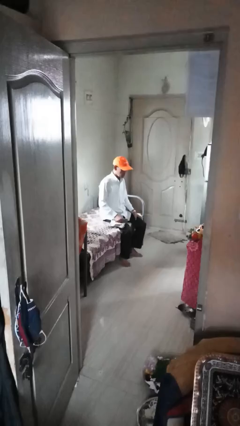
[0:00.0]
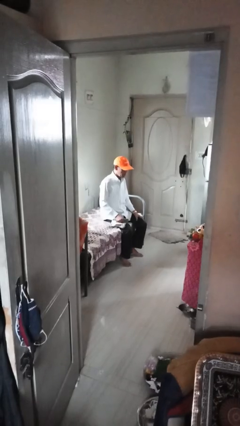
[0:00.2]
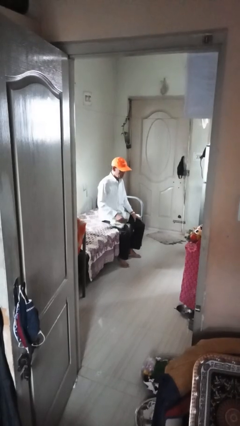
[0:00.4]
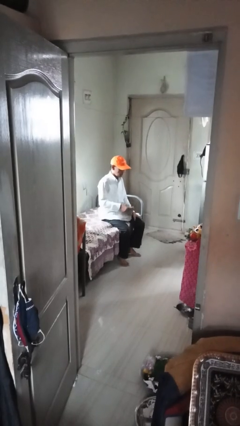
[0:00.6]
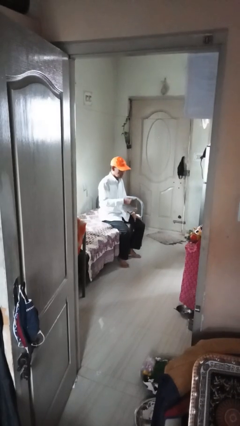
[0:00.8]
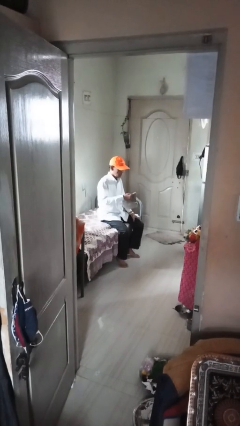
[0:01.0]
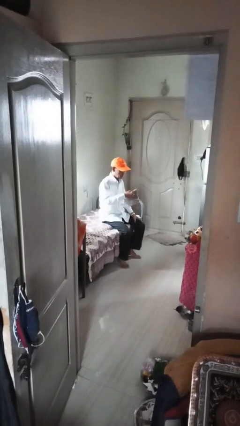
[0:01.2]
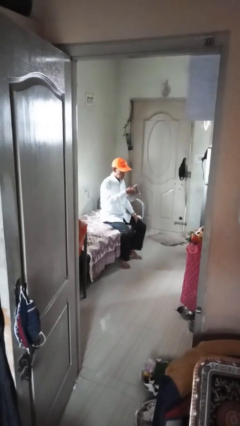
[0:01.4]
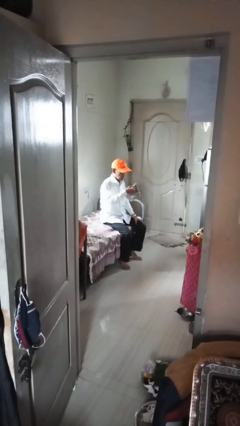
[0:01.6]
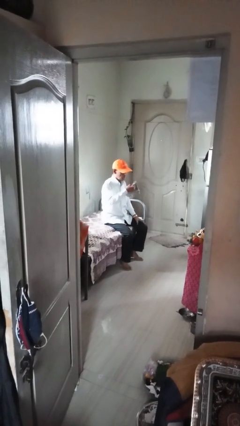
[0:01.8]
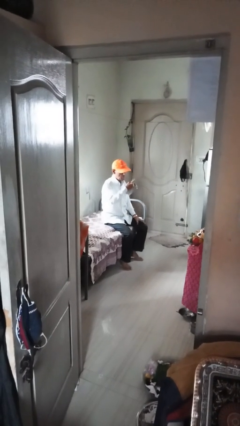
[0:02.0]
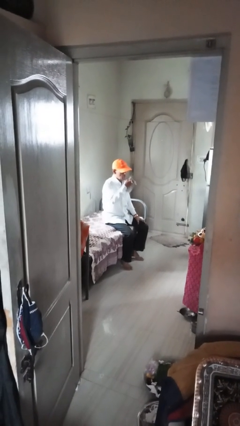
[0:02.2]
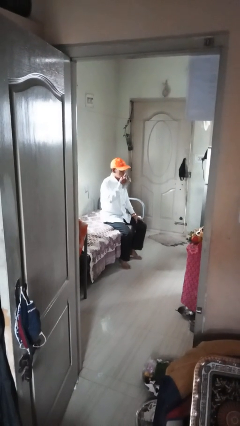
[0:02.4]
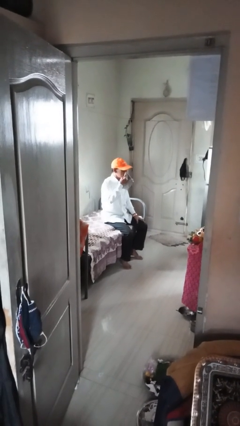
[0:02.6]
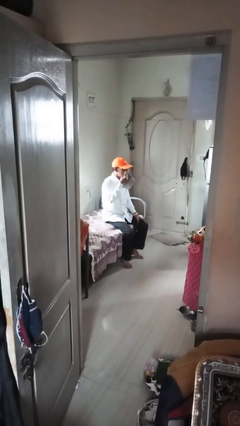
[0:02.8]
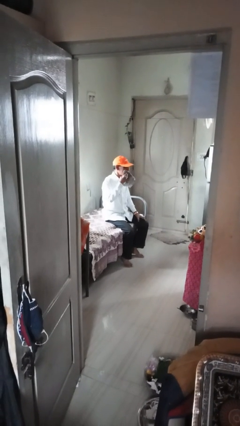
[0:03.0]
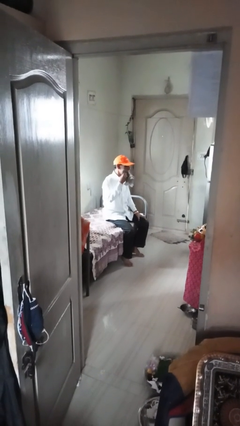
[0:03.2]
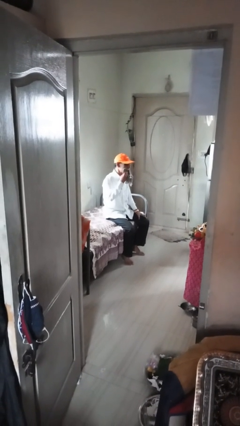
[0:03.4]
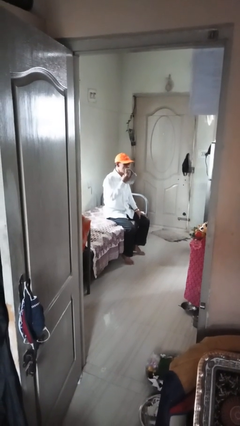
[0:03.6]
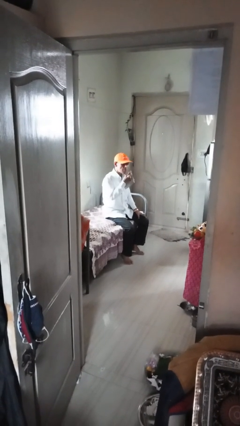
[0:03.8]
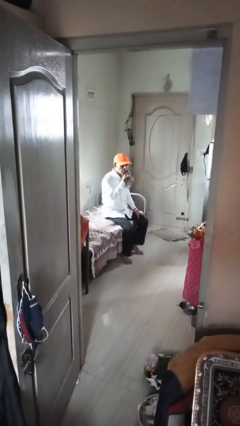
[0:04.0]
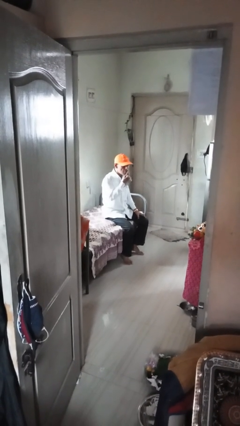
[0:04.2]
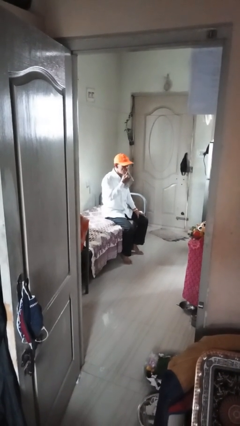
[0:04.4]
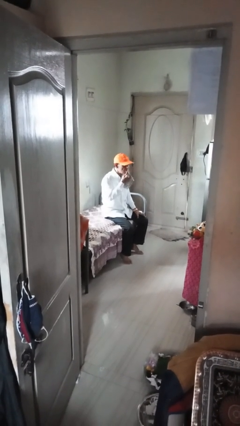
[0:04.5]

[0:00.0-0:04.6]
person wipes mouth with napkin

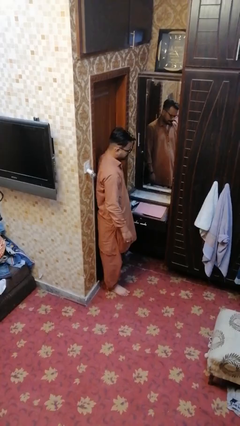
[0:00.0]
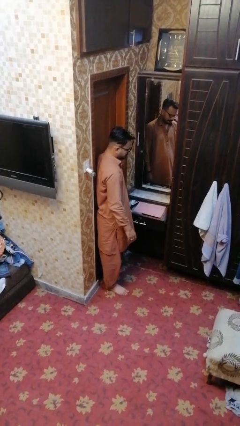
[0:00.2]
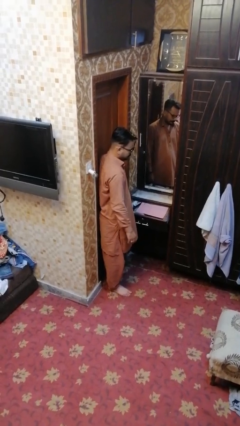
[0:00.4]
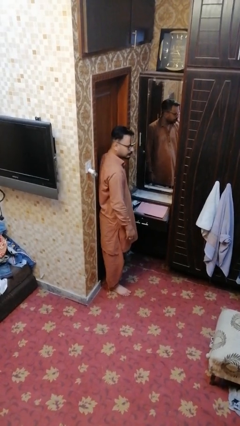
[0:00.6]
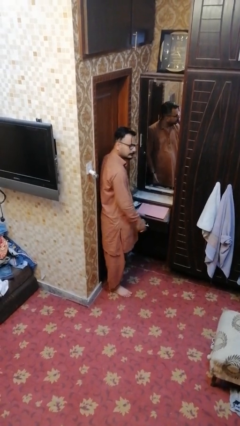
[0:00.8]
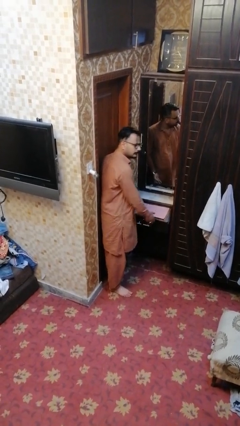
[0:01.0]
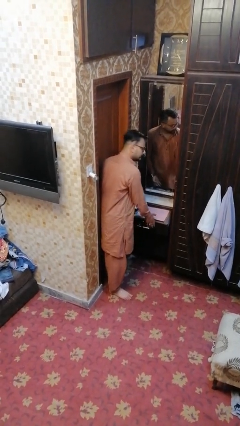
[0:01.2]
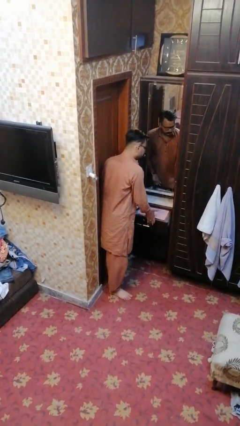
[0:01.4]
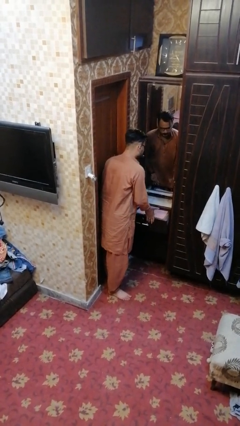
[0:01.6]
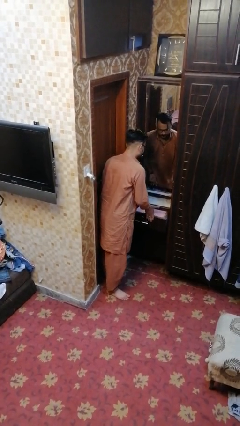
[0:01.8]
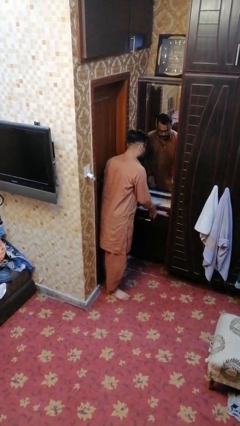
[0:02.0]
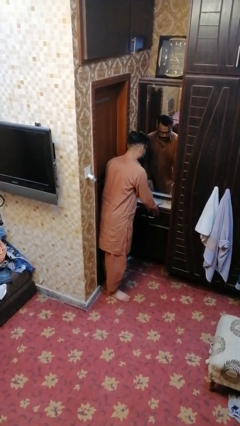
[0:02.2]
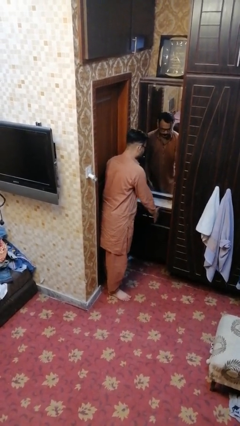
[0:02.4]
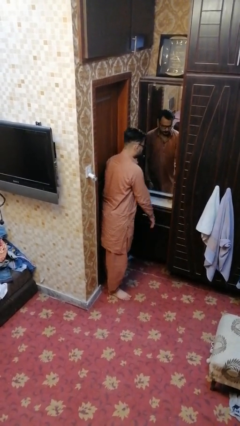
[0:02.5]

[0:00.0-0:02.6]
person closes dresser drawer

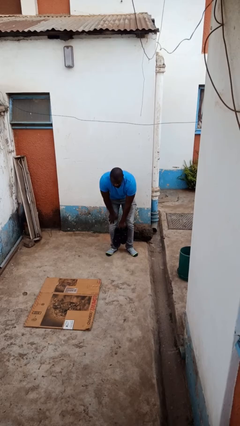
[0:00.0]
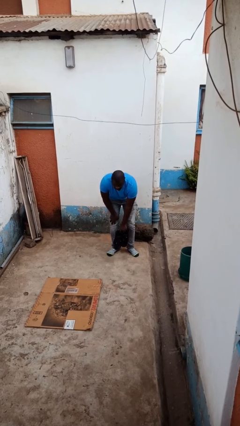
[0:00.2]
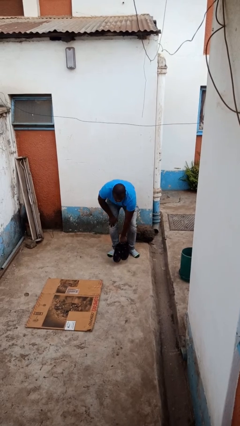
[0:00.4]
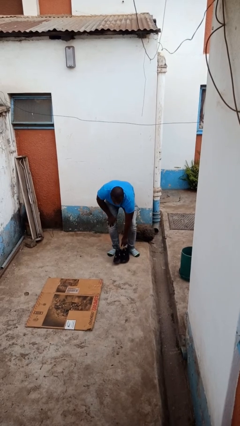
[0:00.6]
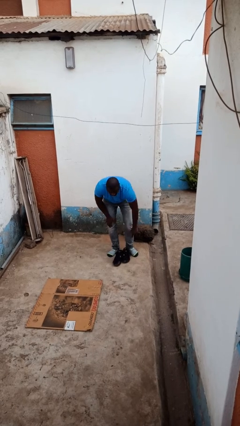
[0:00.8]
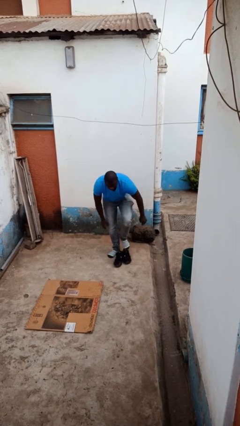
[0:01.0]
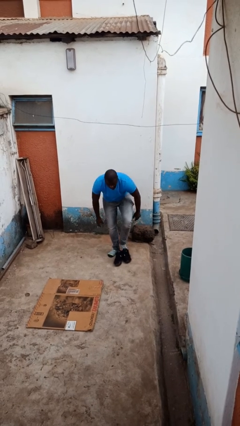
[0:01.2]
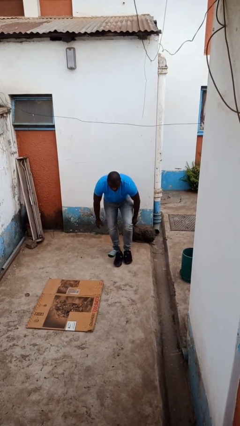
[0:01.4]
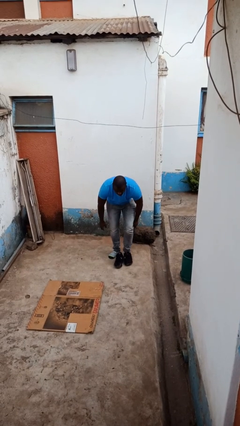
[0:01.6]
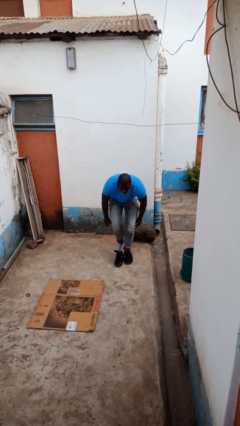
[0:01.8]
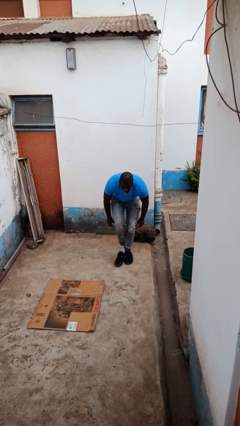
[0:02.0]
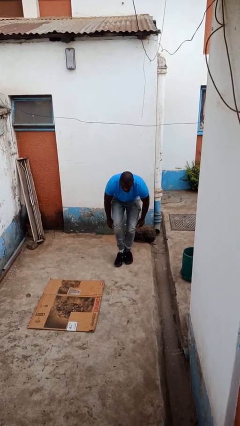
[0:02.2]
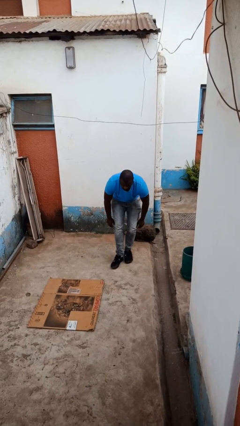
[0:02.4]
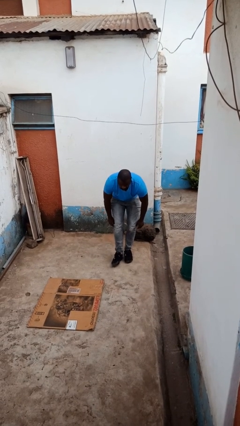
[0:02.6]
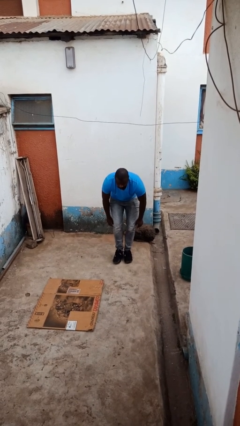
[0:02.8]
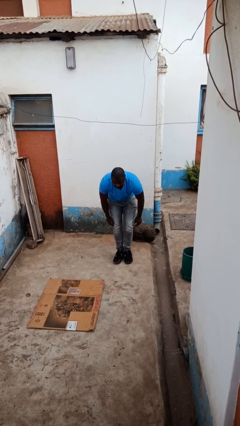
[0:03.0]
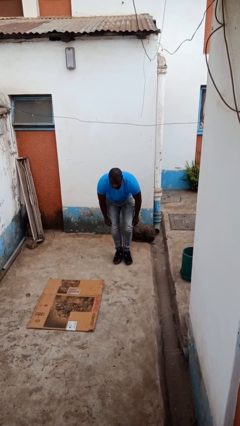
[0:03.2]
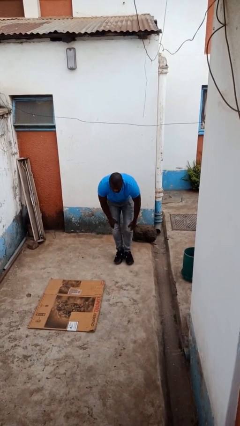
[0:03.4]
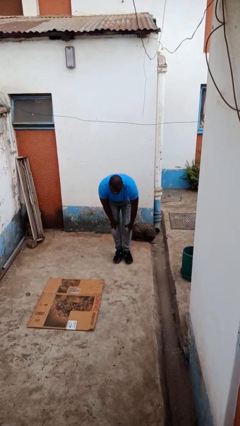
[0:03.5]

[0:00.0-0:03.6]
person puts on shoes

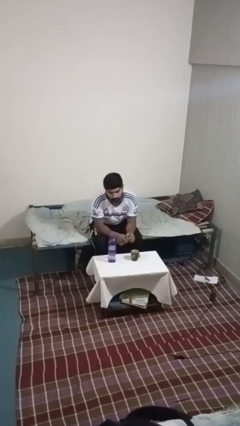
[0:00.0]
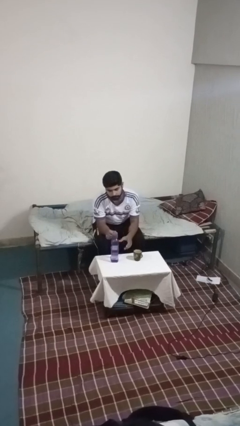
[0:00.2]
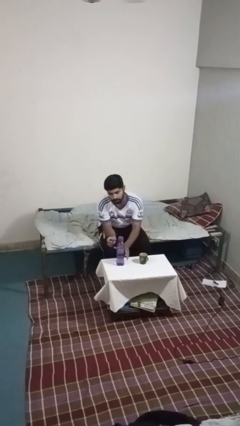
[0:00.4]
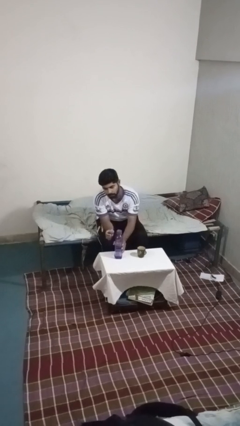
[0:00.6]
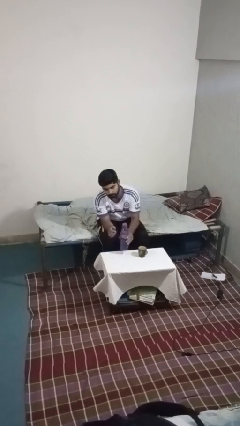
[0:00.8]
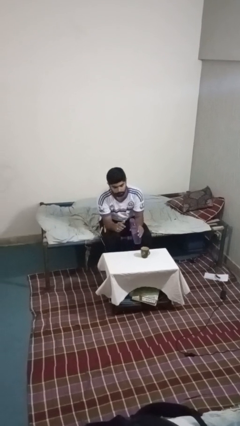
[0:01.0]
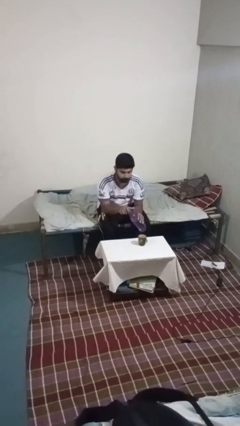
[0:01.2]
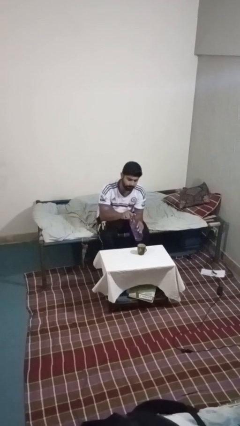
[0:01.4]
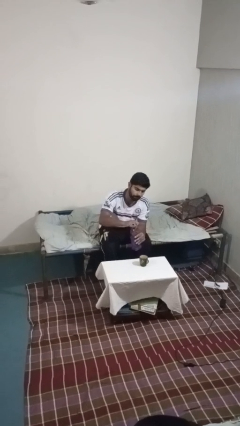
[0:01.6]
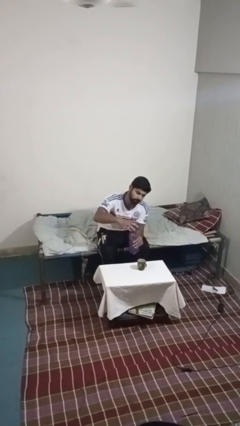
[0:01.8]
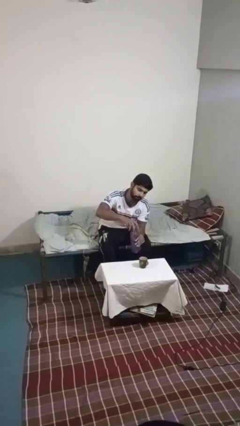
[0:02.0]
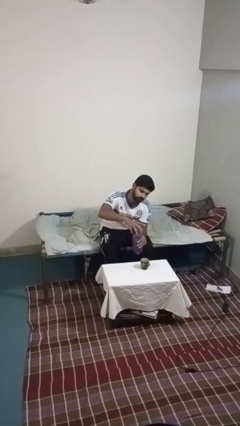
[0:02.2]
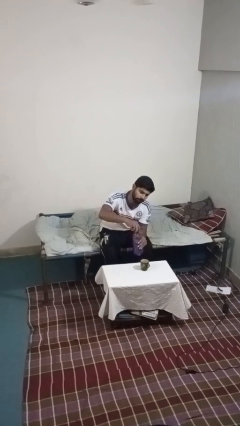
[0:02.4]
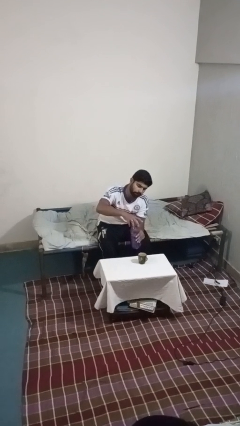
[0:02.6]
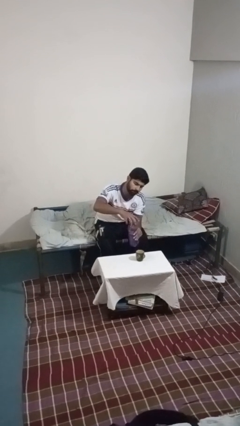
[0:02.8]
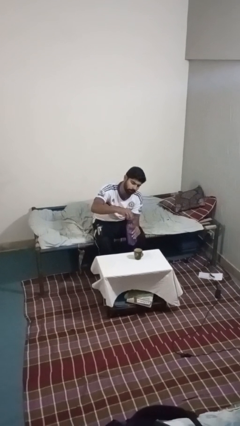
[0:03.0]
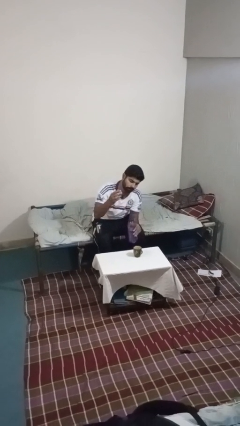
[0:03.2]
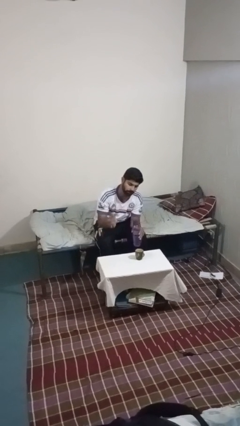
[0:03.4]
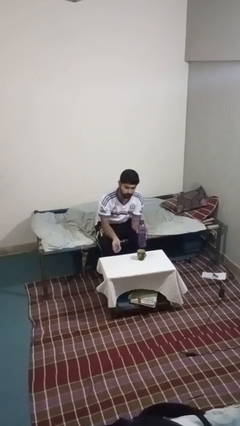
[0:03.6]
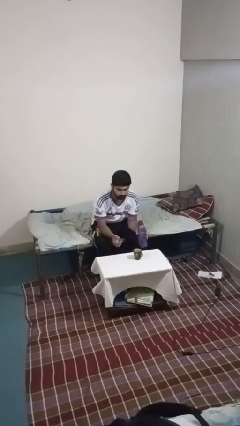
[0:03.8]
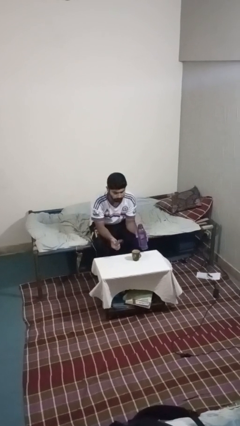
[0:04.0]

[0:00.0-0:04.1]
person unscrews lid from bottle

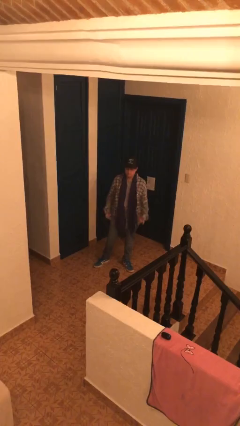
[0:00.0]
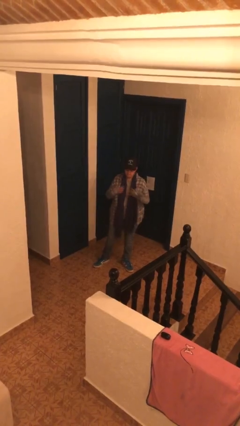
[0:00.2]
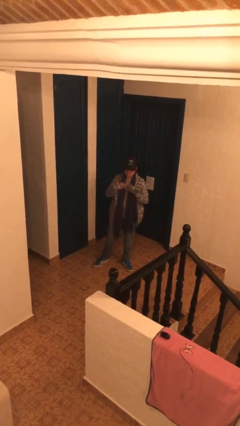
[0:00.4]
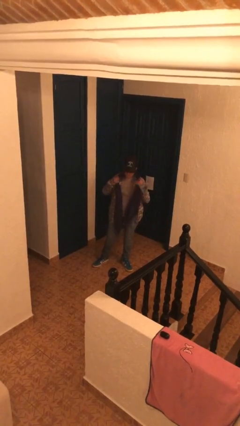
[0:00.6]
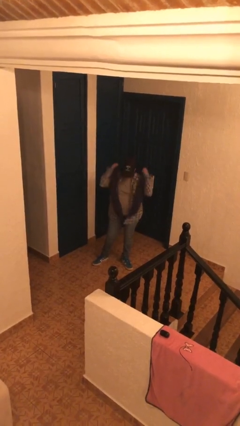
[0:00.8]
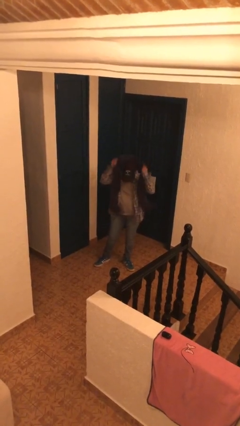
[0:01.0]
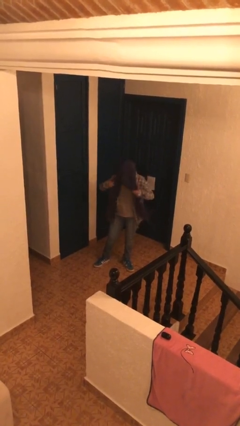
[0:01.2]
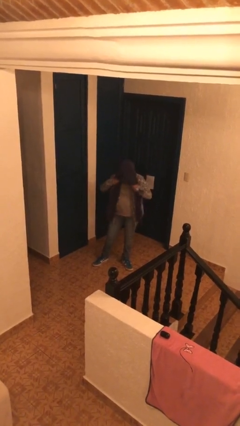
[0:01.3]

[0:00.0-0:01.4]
person takes off scarf

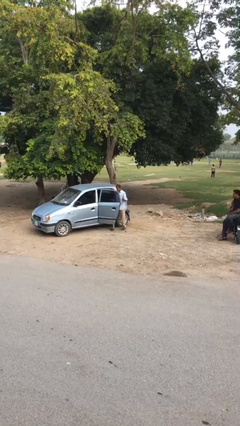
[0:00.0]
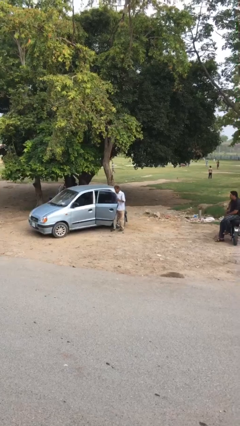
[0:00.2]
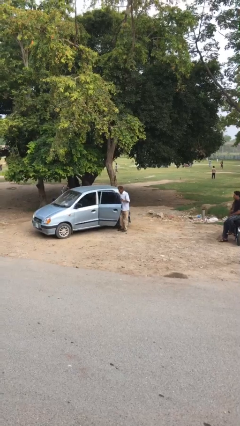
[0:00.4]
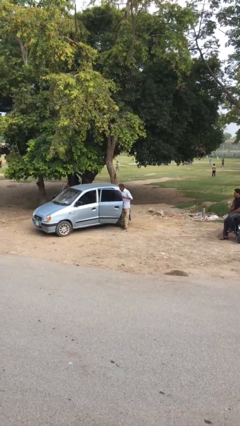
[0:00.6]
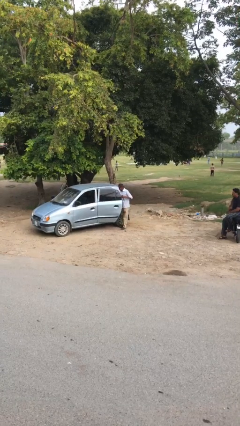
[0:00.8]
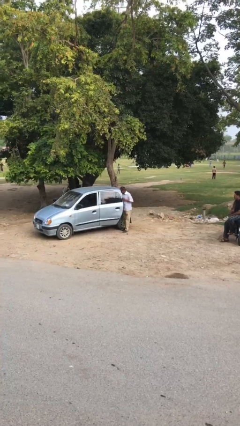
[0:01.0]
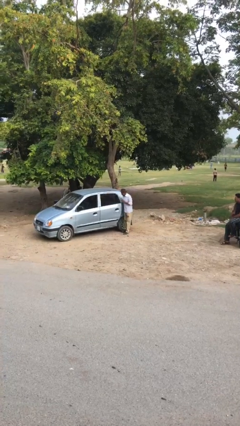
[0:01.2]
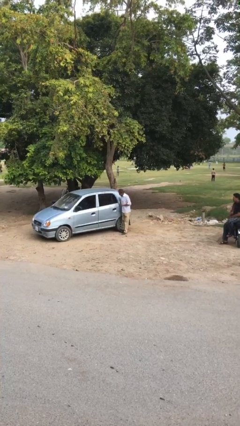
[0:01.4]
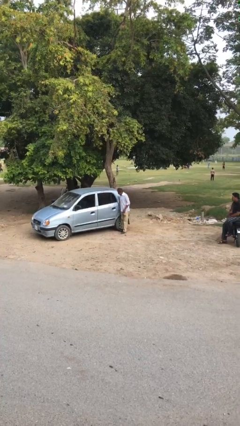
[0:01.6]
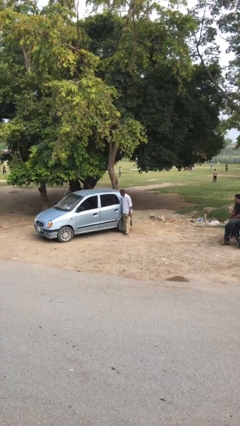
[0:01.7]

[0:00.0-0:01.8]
person closes car door
